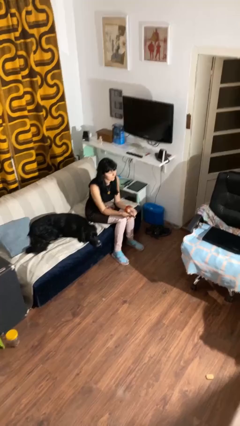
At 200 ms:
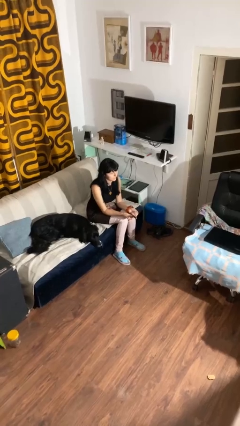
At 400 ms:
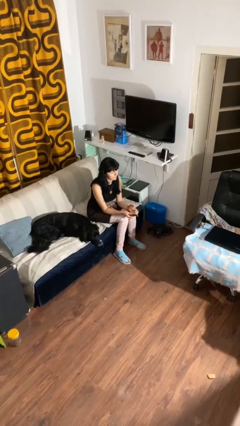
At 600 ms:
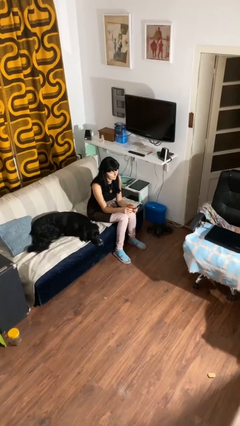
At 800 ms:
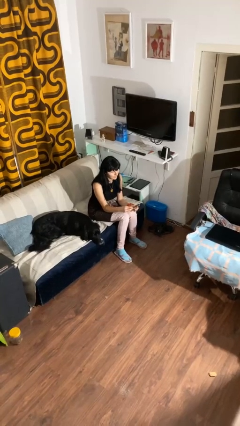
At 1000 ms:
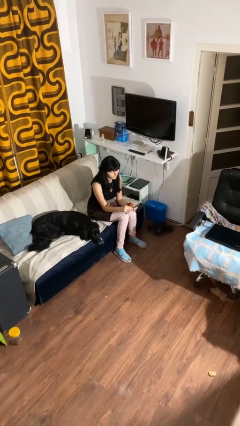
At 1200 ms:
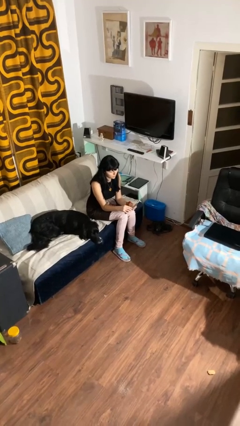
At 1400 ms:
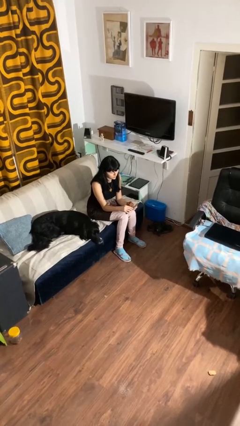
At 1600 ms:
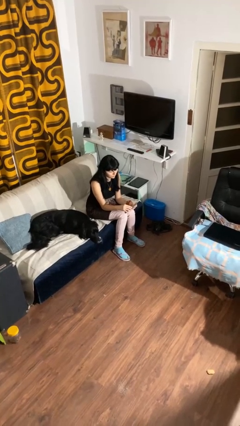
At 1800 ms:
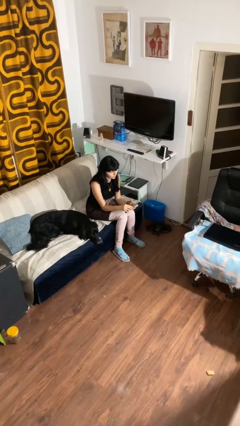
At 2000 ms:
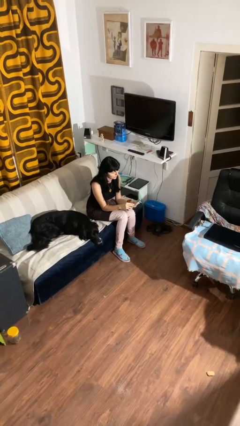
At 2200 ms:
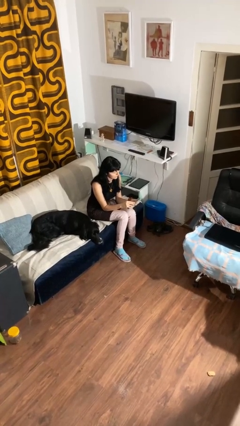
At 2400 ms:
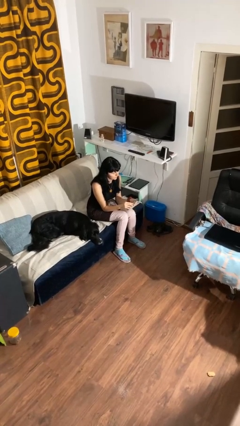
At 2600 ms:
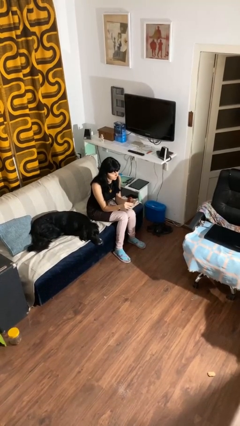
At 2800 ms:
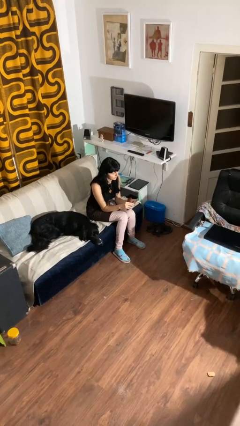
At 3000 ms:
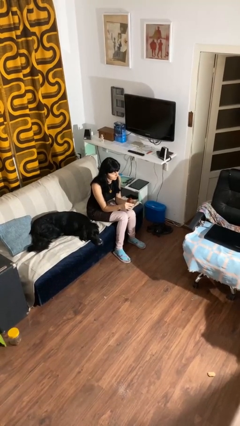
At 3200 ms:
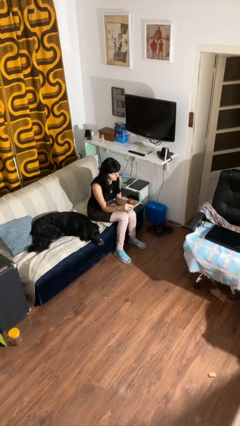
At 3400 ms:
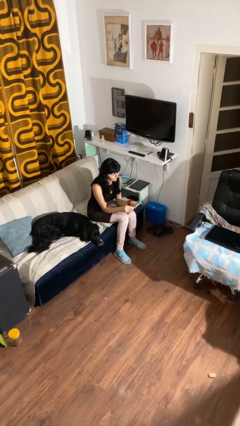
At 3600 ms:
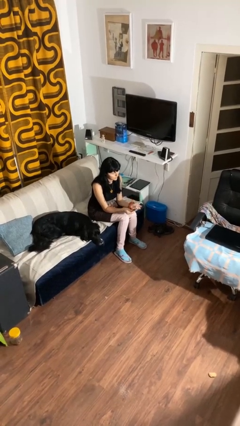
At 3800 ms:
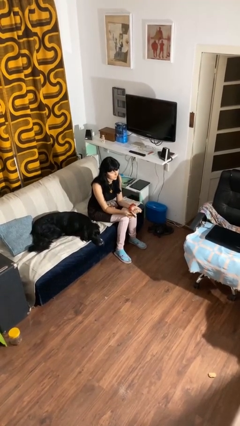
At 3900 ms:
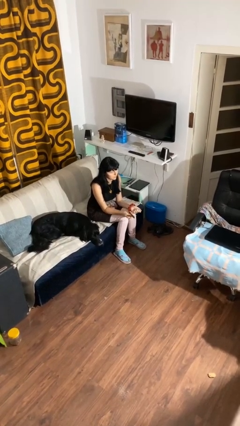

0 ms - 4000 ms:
person files fingernails

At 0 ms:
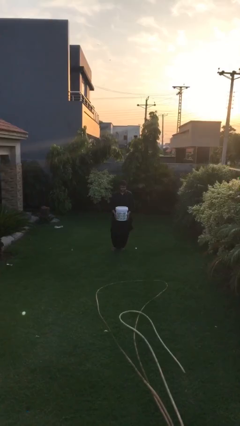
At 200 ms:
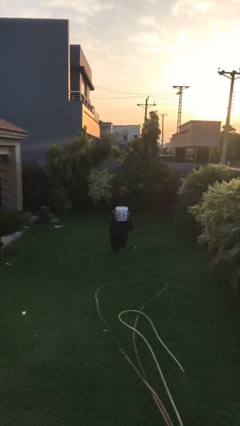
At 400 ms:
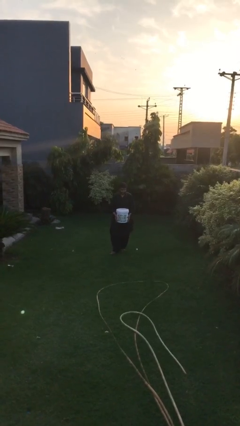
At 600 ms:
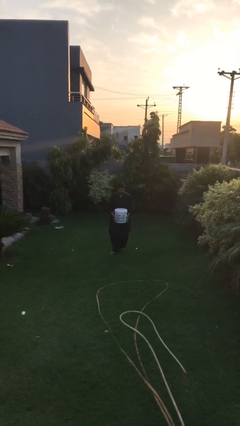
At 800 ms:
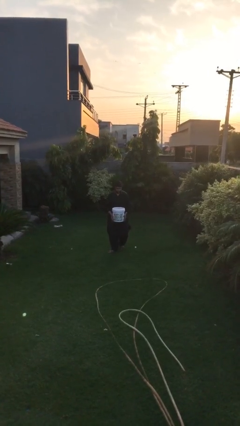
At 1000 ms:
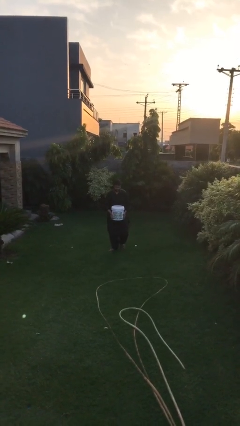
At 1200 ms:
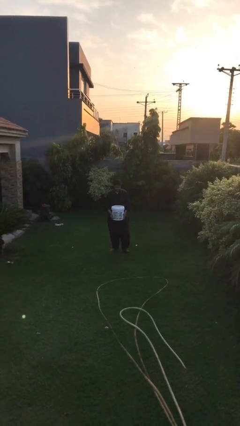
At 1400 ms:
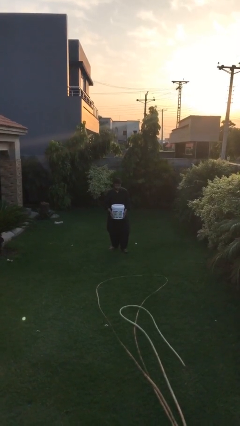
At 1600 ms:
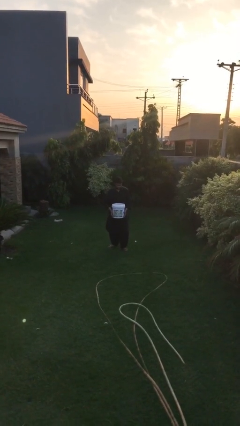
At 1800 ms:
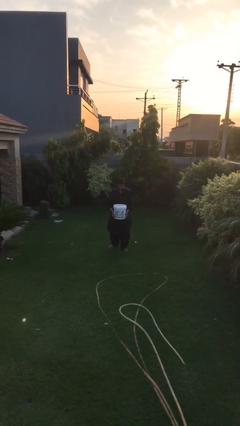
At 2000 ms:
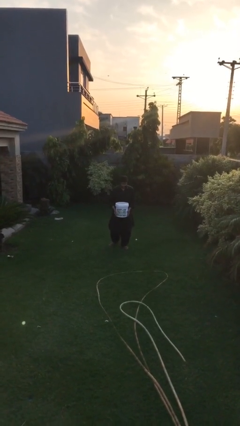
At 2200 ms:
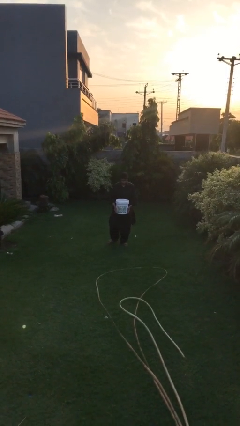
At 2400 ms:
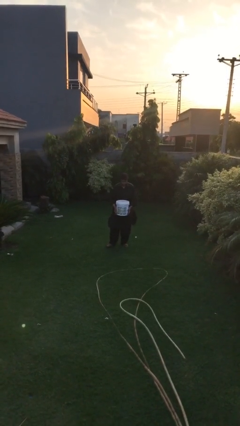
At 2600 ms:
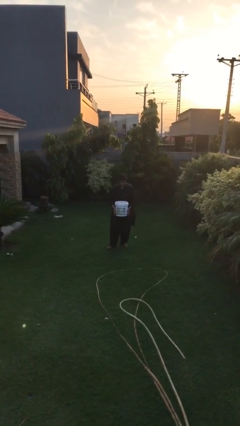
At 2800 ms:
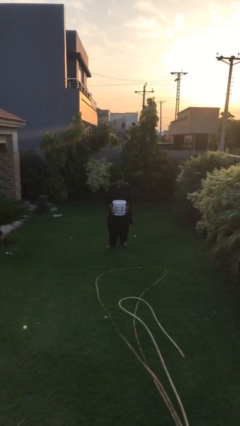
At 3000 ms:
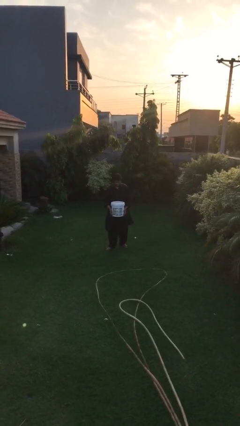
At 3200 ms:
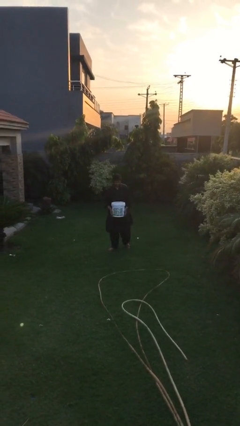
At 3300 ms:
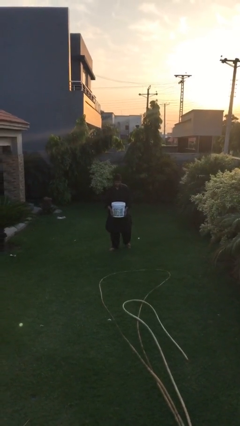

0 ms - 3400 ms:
person carries heavy object

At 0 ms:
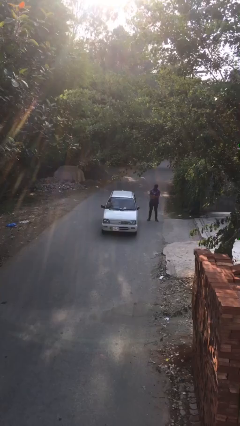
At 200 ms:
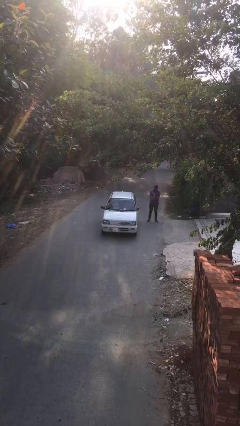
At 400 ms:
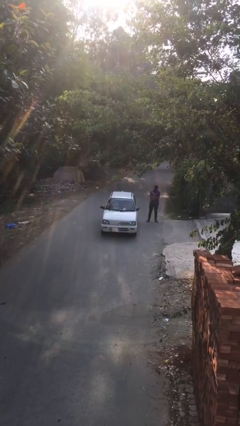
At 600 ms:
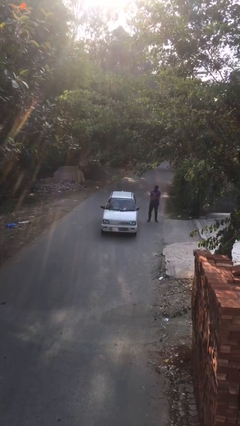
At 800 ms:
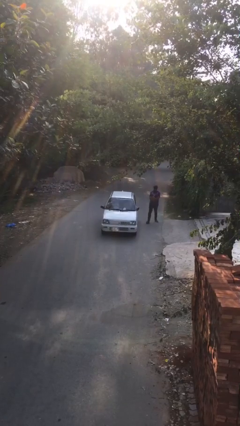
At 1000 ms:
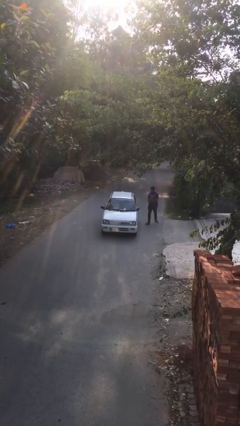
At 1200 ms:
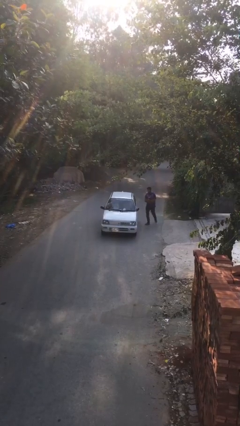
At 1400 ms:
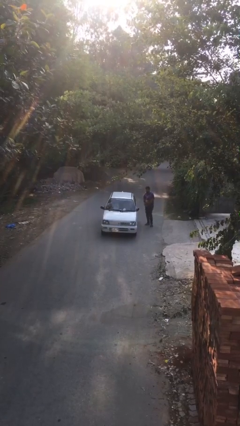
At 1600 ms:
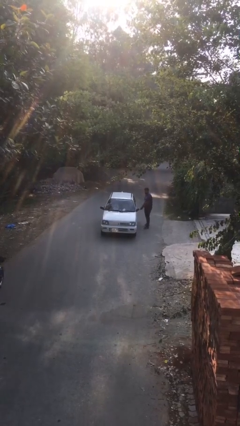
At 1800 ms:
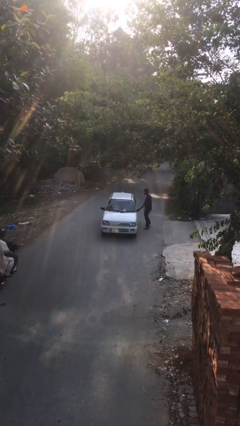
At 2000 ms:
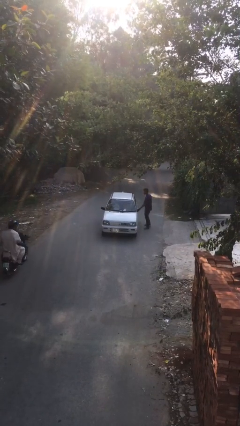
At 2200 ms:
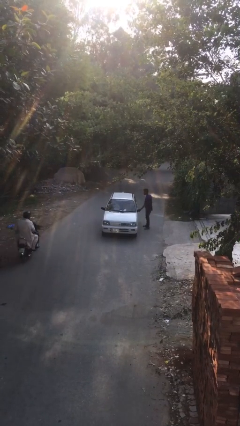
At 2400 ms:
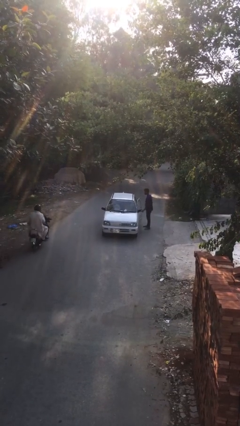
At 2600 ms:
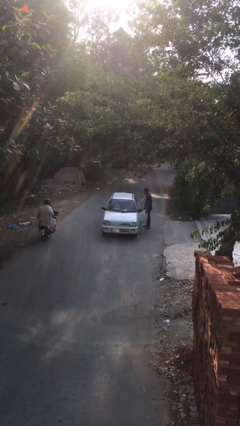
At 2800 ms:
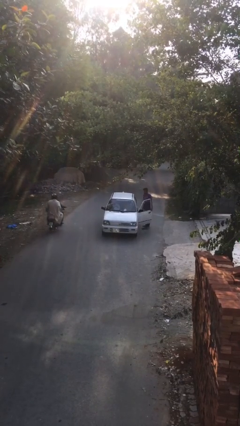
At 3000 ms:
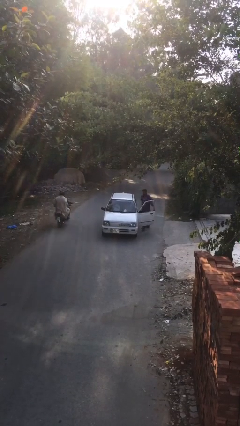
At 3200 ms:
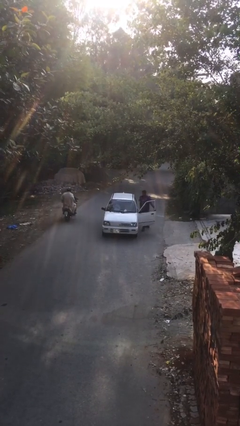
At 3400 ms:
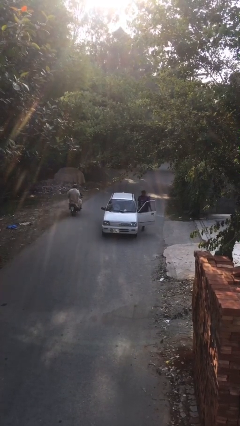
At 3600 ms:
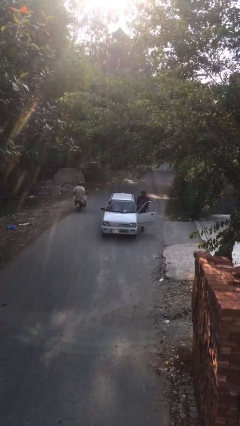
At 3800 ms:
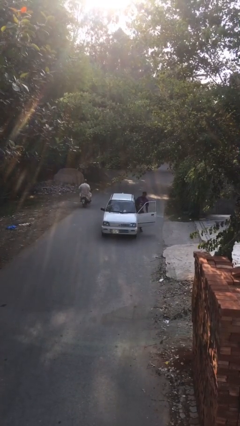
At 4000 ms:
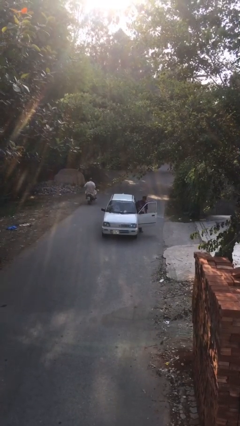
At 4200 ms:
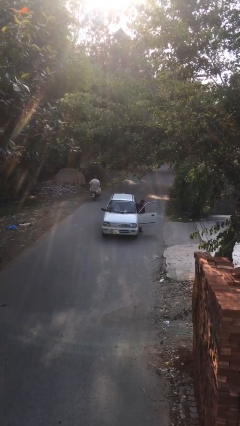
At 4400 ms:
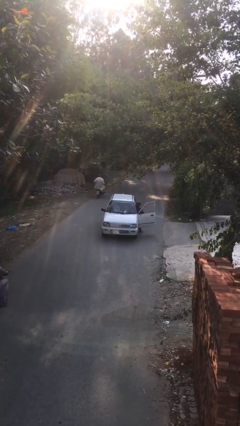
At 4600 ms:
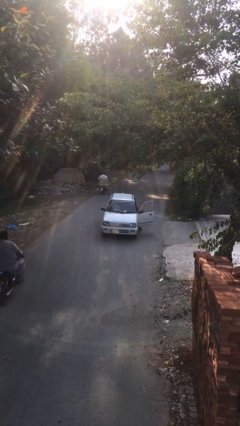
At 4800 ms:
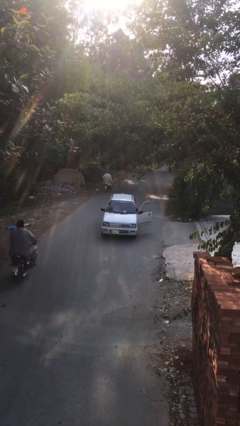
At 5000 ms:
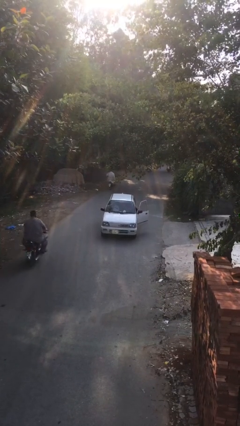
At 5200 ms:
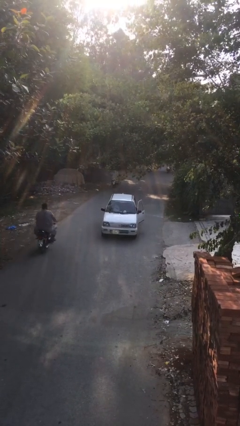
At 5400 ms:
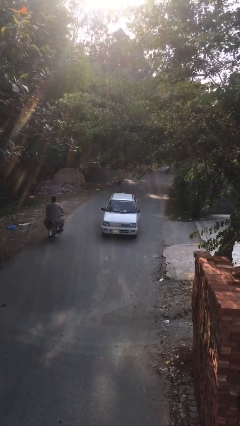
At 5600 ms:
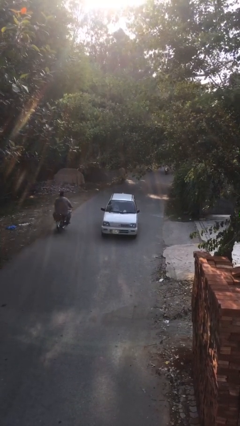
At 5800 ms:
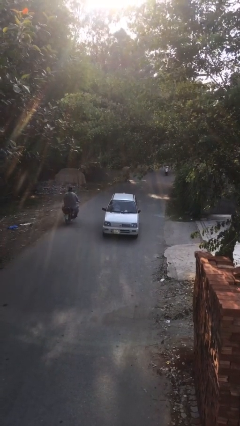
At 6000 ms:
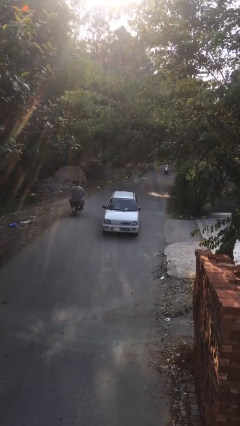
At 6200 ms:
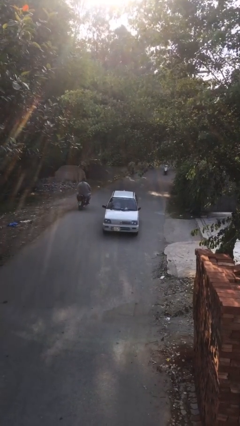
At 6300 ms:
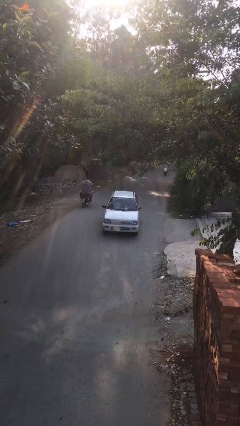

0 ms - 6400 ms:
car picks up person

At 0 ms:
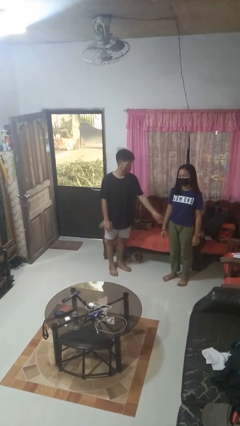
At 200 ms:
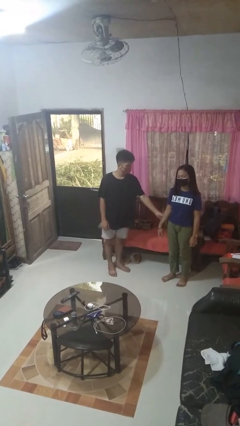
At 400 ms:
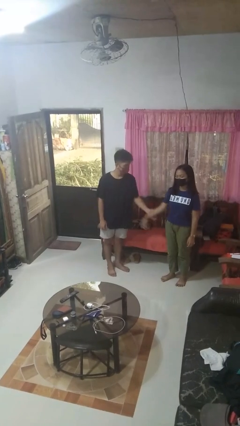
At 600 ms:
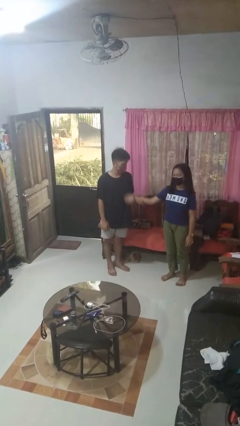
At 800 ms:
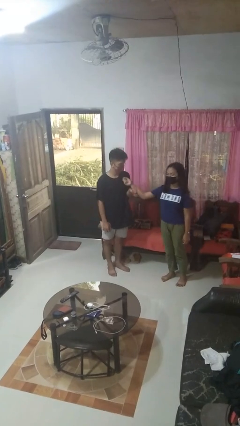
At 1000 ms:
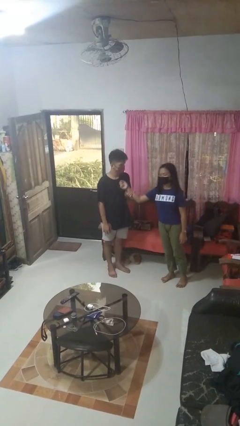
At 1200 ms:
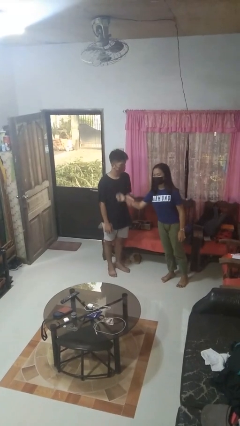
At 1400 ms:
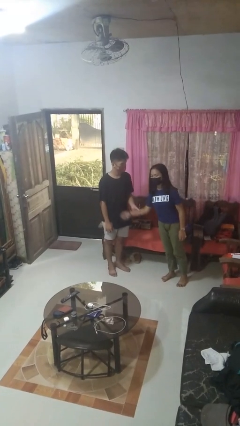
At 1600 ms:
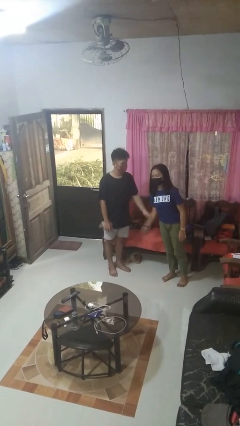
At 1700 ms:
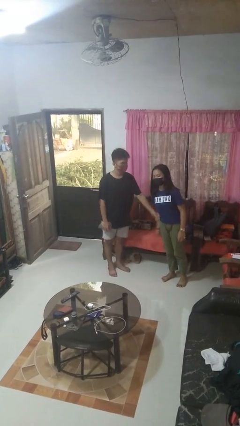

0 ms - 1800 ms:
person grabs person by forearm

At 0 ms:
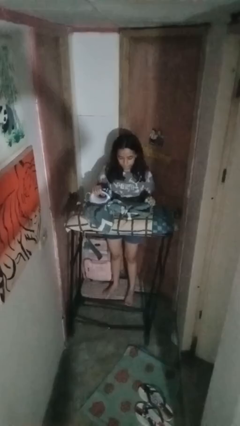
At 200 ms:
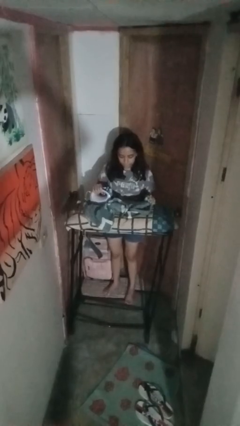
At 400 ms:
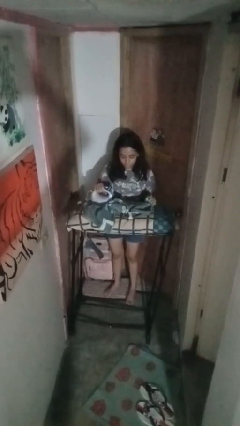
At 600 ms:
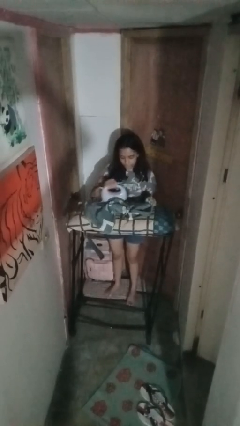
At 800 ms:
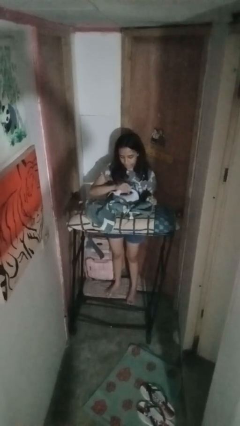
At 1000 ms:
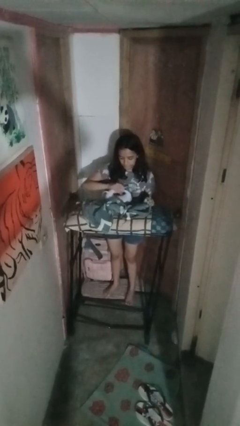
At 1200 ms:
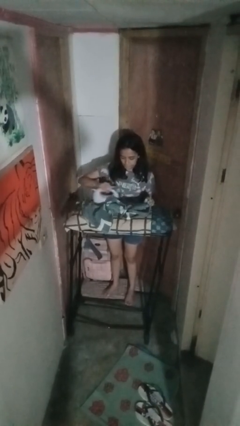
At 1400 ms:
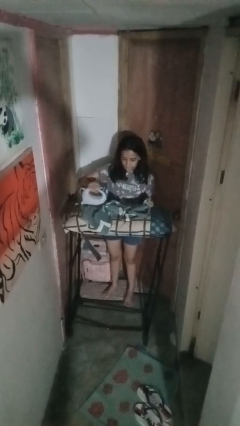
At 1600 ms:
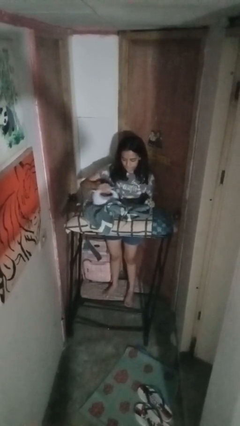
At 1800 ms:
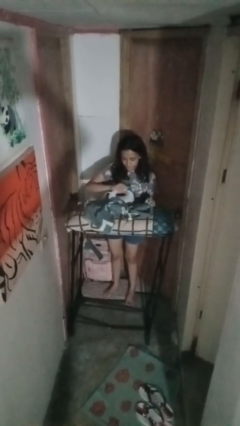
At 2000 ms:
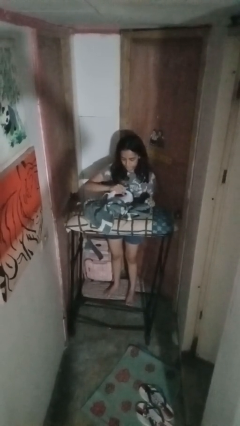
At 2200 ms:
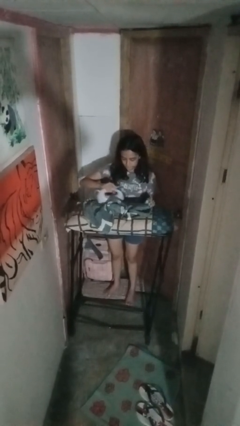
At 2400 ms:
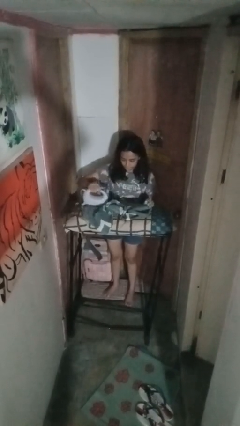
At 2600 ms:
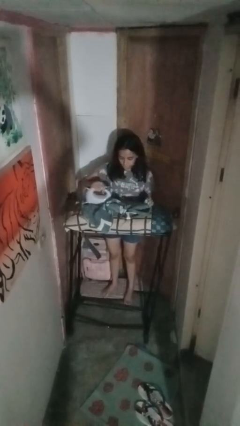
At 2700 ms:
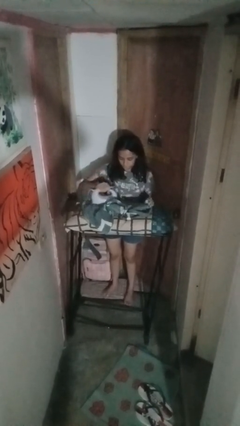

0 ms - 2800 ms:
person irons clothes
